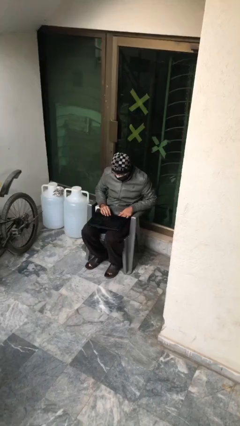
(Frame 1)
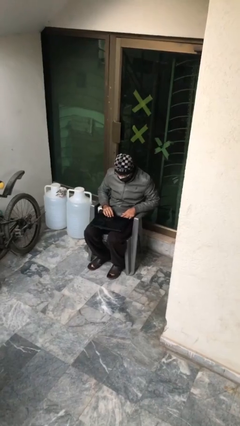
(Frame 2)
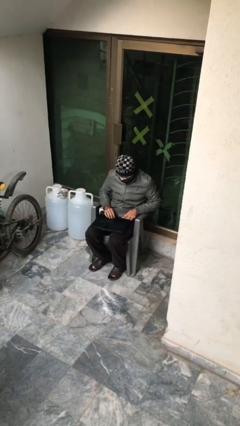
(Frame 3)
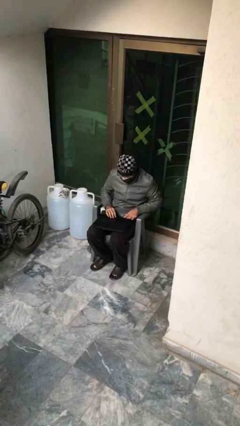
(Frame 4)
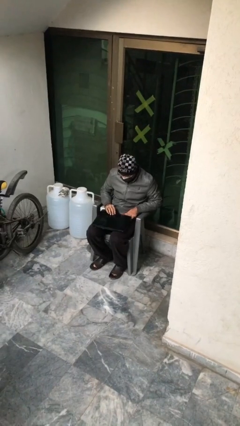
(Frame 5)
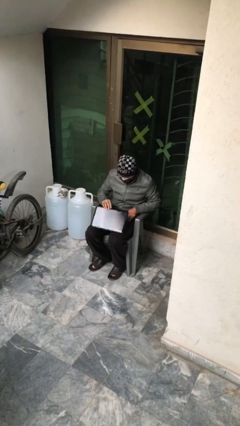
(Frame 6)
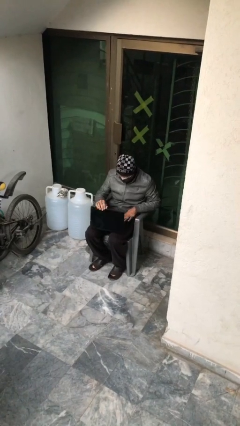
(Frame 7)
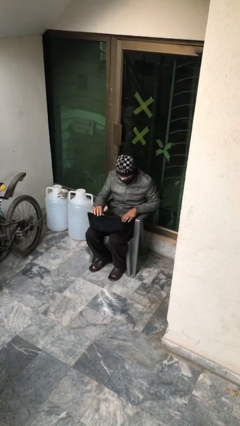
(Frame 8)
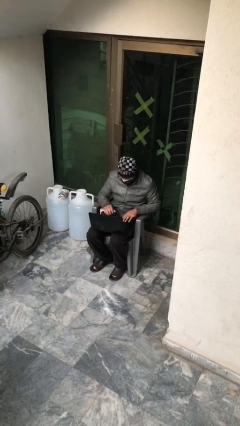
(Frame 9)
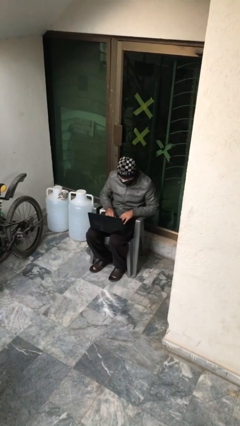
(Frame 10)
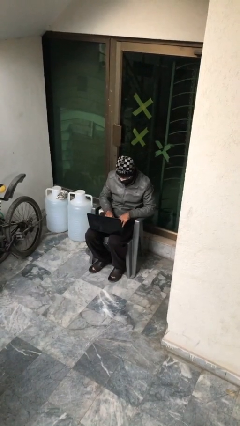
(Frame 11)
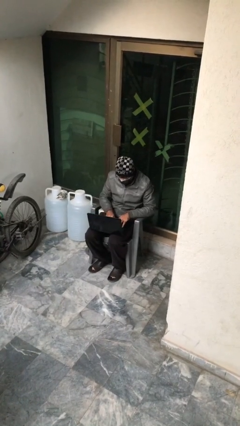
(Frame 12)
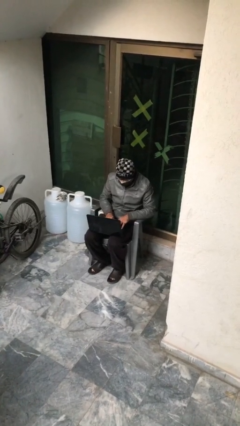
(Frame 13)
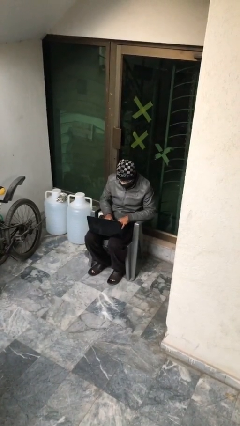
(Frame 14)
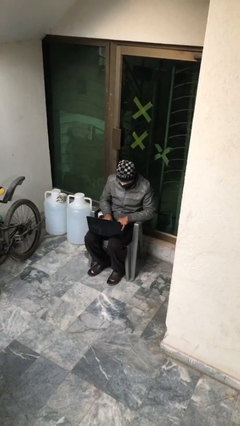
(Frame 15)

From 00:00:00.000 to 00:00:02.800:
person interacts with laptop

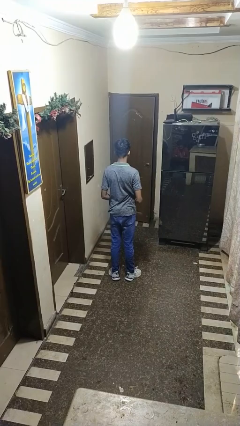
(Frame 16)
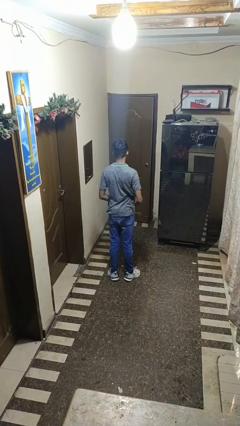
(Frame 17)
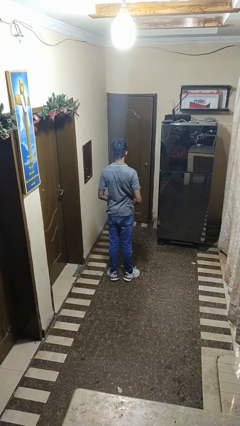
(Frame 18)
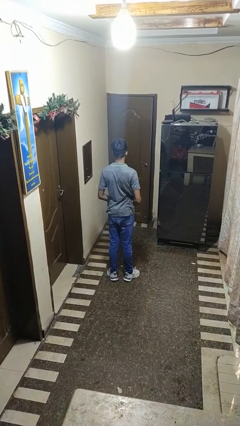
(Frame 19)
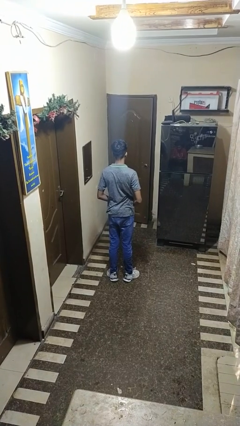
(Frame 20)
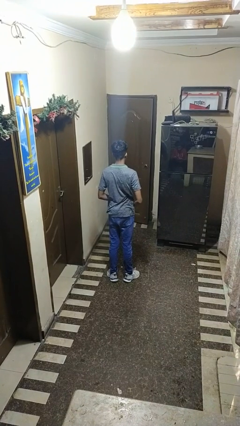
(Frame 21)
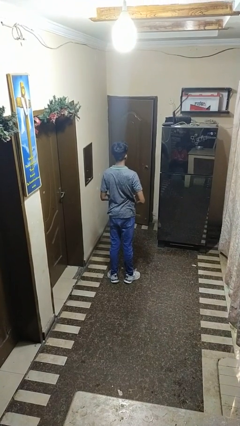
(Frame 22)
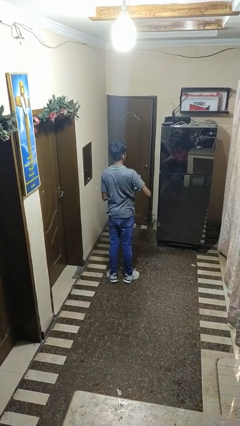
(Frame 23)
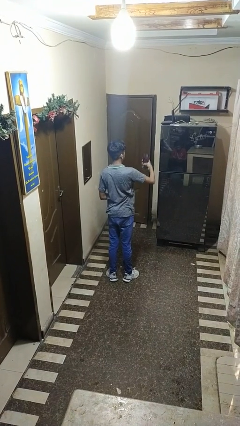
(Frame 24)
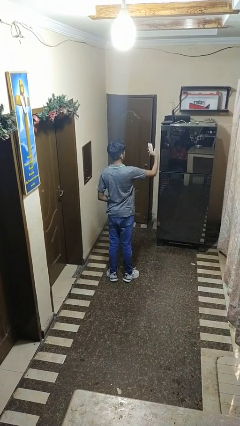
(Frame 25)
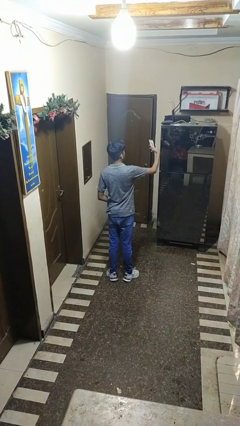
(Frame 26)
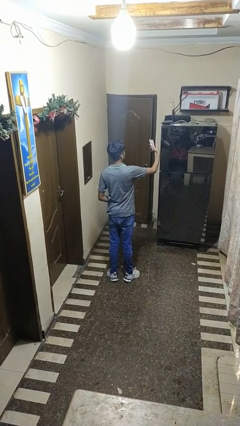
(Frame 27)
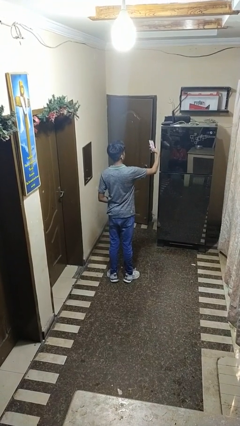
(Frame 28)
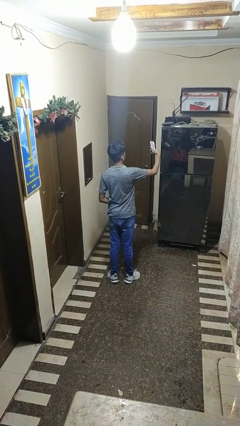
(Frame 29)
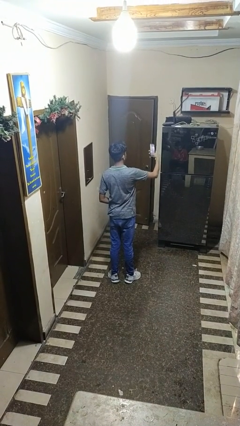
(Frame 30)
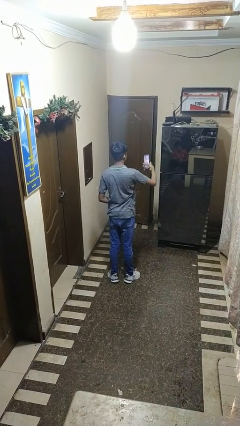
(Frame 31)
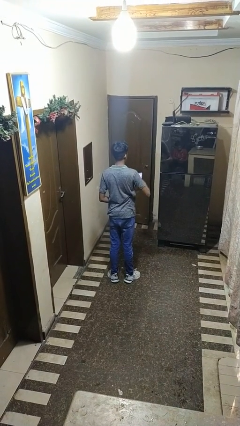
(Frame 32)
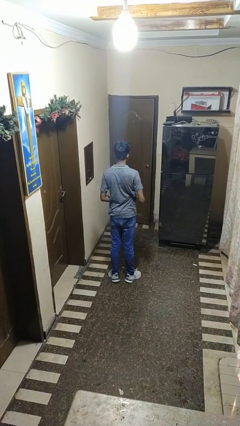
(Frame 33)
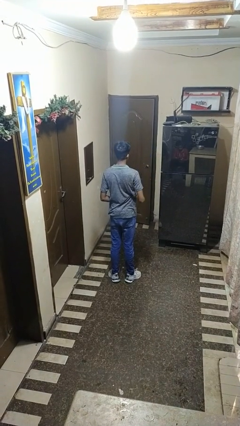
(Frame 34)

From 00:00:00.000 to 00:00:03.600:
person takes selfie

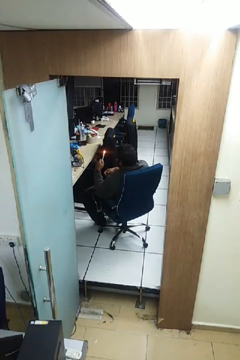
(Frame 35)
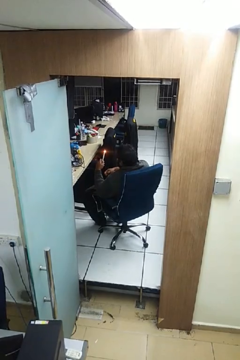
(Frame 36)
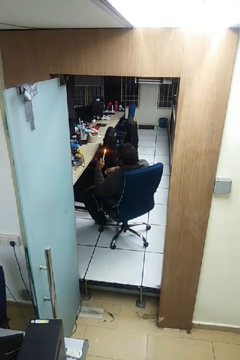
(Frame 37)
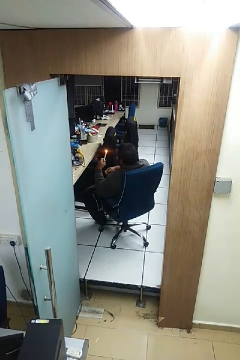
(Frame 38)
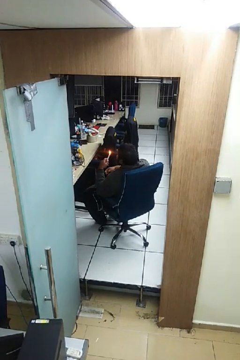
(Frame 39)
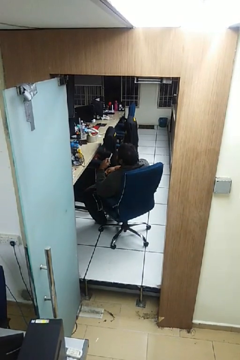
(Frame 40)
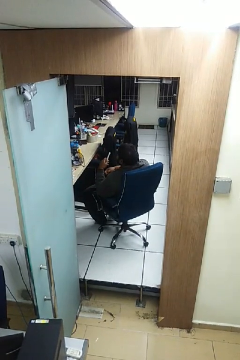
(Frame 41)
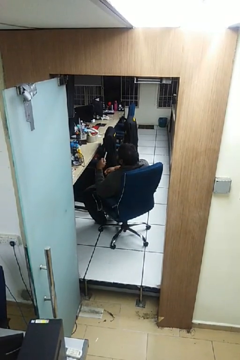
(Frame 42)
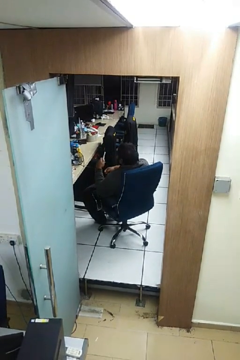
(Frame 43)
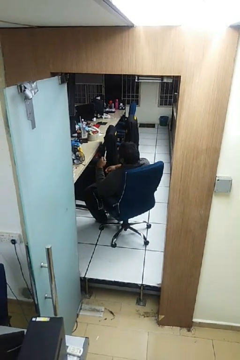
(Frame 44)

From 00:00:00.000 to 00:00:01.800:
person extinguishes candle

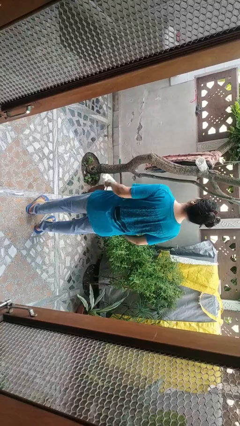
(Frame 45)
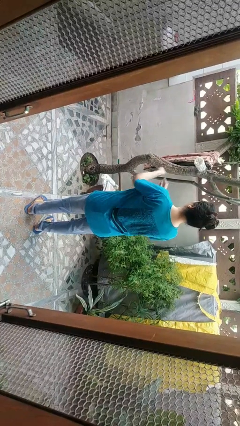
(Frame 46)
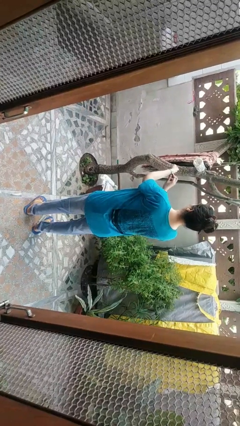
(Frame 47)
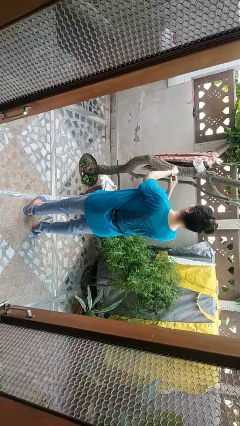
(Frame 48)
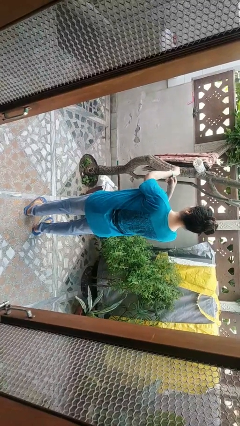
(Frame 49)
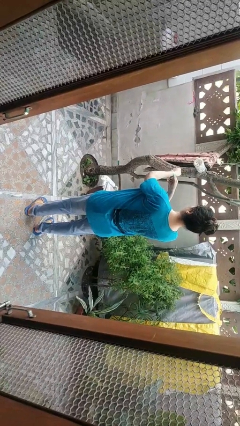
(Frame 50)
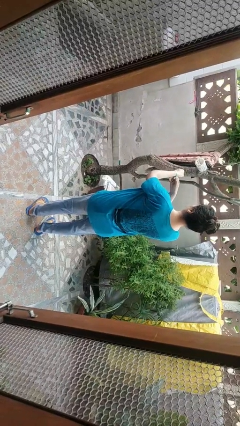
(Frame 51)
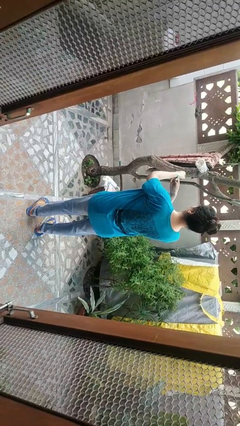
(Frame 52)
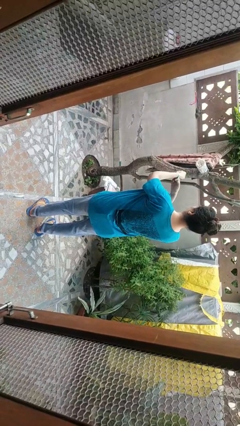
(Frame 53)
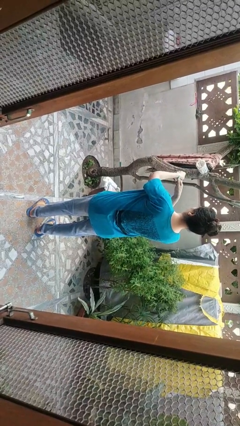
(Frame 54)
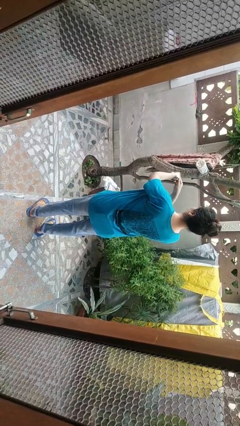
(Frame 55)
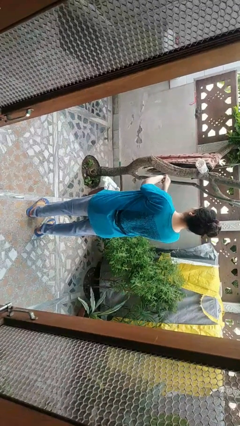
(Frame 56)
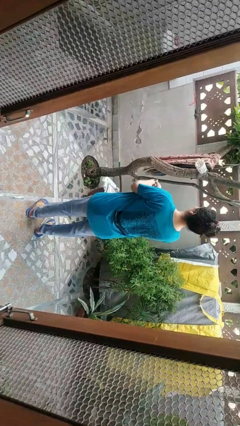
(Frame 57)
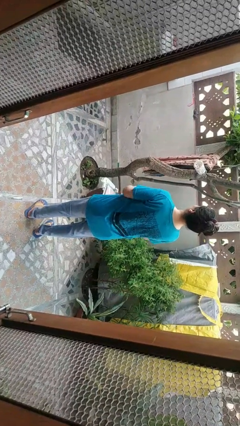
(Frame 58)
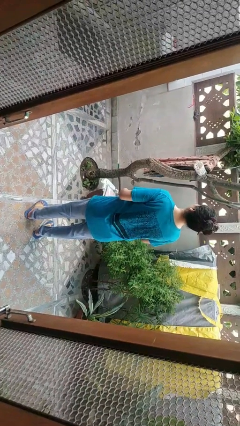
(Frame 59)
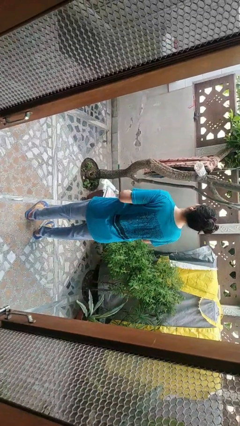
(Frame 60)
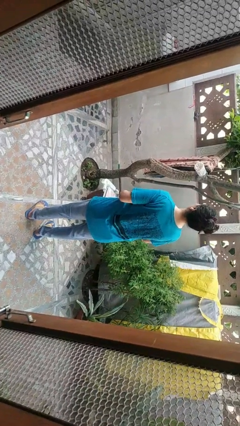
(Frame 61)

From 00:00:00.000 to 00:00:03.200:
person takes off wristwatch

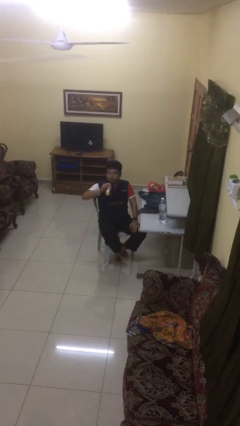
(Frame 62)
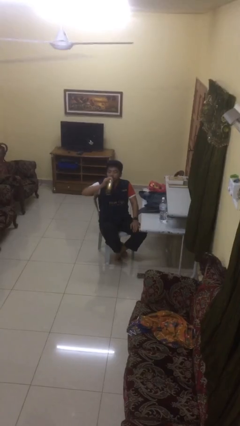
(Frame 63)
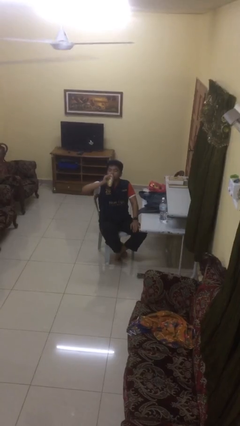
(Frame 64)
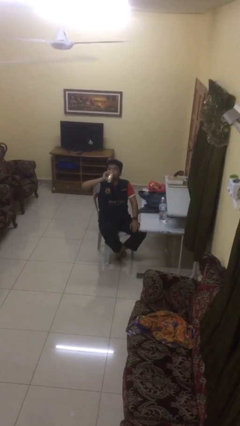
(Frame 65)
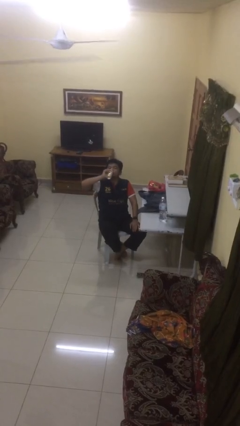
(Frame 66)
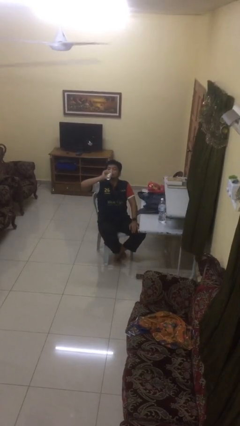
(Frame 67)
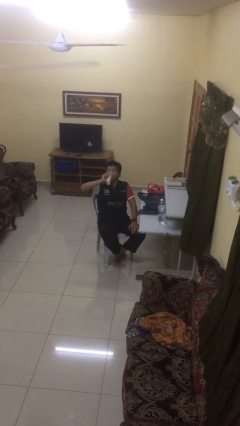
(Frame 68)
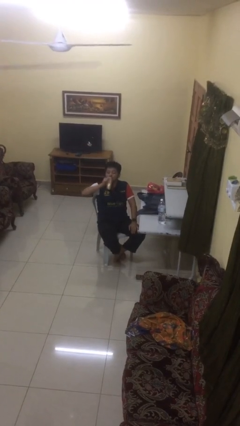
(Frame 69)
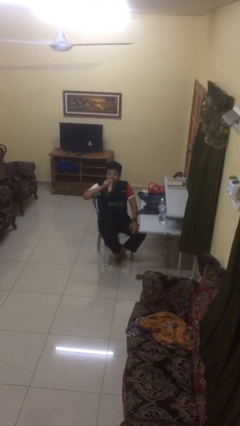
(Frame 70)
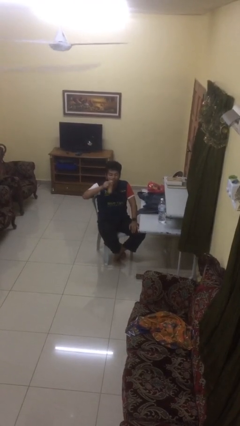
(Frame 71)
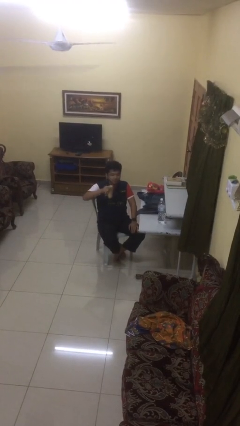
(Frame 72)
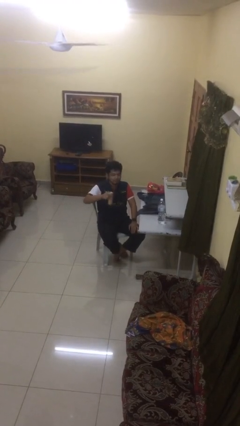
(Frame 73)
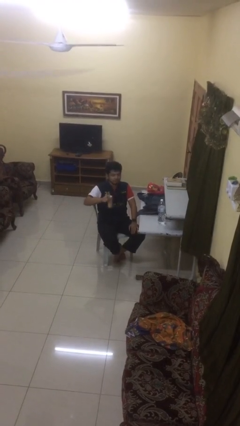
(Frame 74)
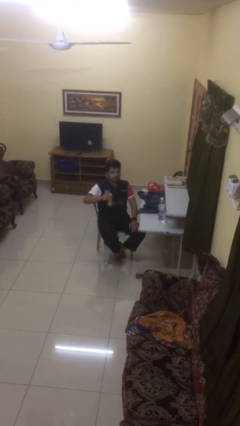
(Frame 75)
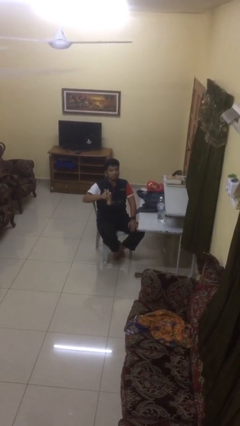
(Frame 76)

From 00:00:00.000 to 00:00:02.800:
person drinks from beverage can

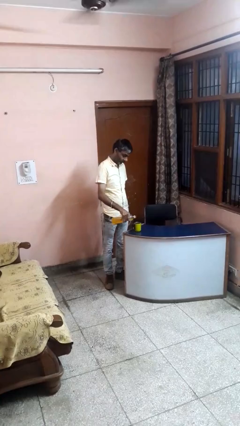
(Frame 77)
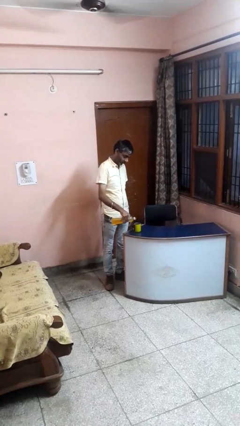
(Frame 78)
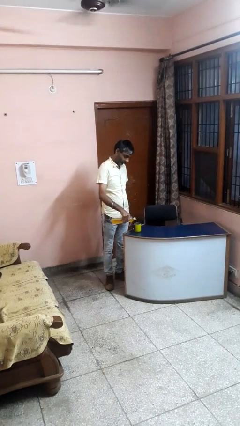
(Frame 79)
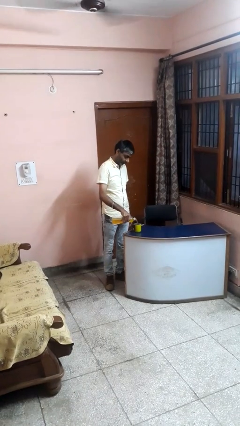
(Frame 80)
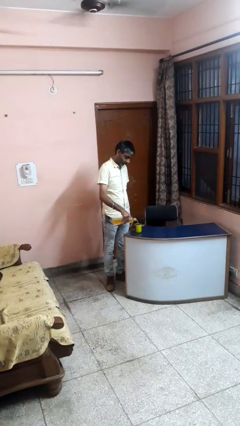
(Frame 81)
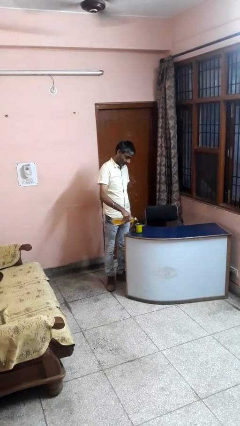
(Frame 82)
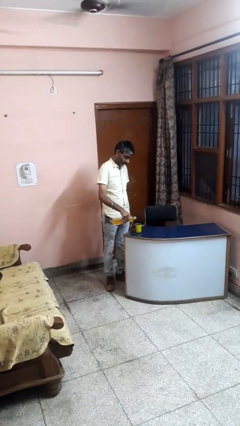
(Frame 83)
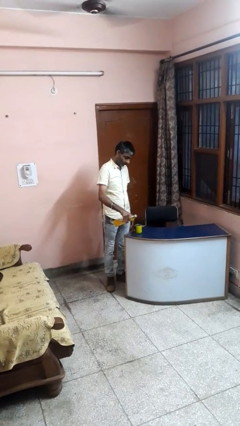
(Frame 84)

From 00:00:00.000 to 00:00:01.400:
person pours liquid into cup

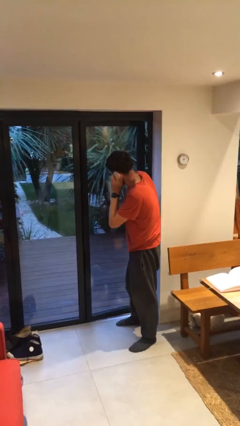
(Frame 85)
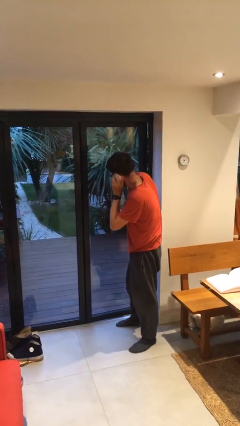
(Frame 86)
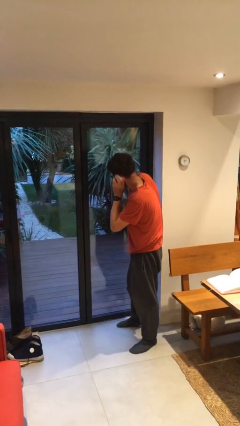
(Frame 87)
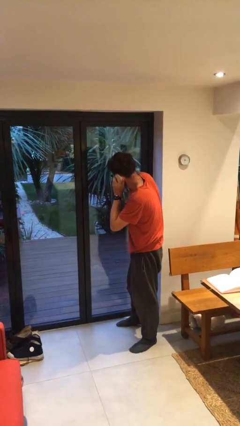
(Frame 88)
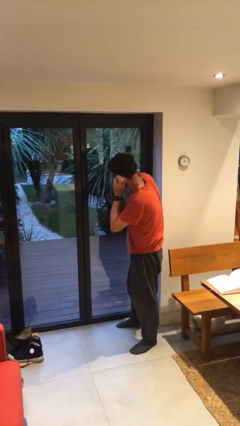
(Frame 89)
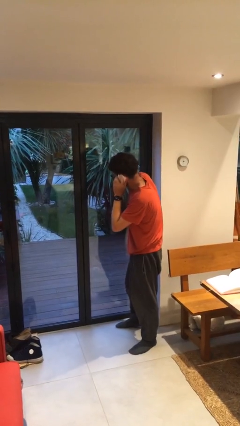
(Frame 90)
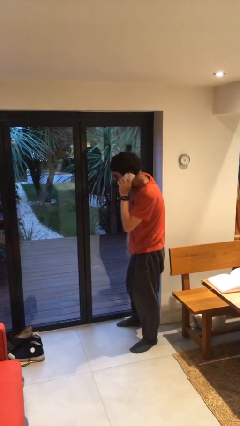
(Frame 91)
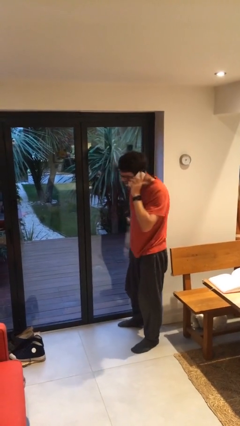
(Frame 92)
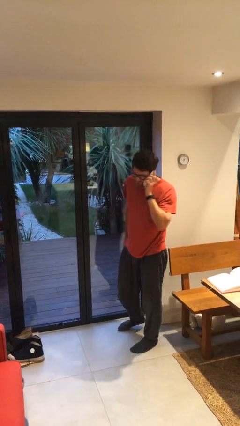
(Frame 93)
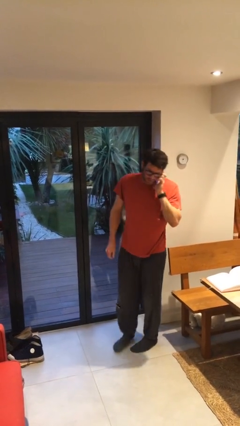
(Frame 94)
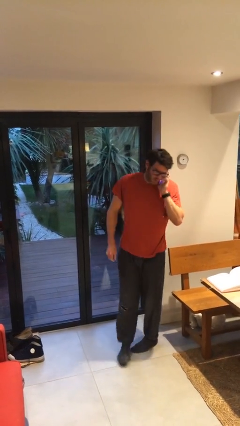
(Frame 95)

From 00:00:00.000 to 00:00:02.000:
person closes facility door
